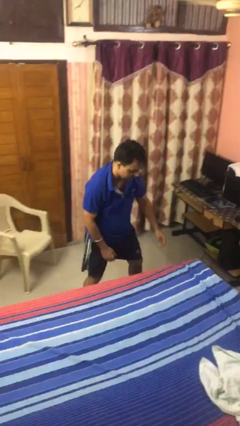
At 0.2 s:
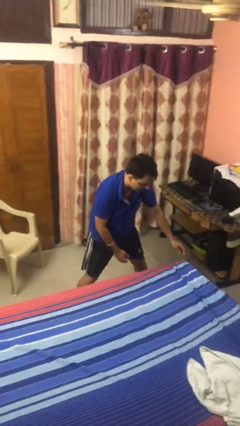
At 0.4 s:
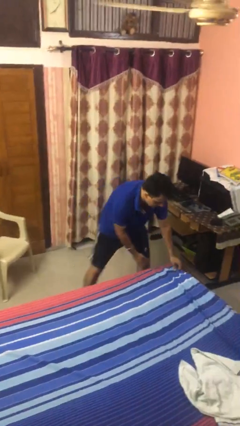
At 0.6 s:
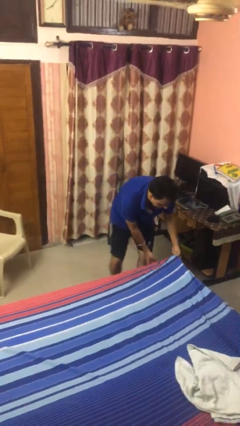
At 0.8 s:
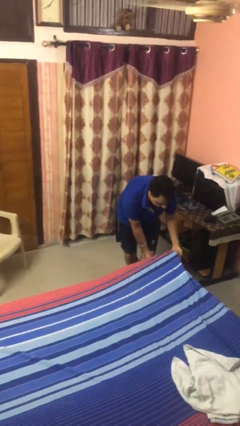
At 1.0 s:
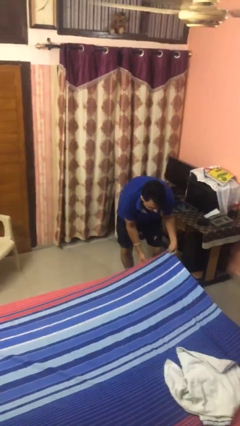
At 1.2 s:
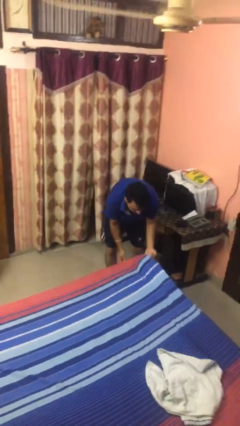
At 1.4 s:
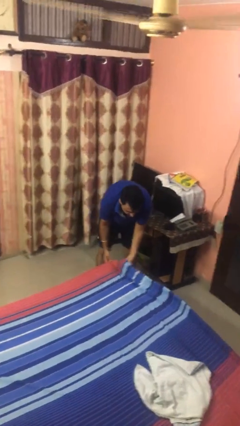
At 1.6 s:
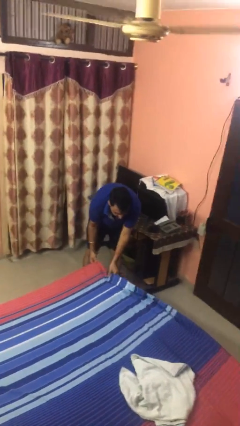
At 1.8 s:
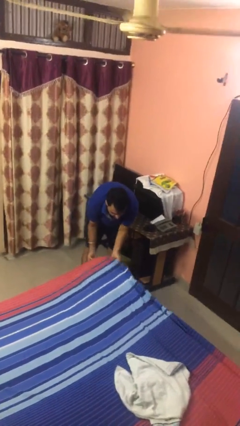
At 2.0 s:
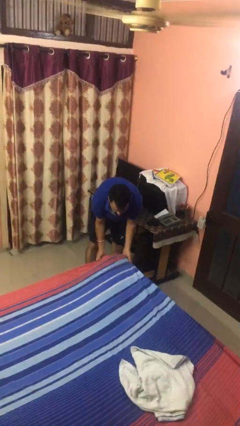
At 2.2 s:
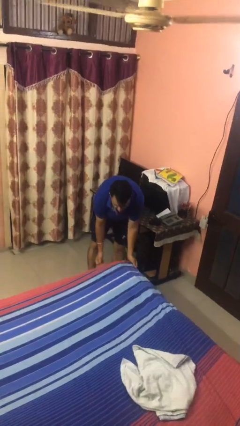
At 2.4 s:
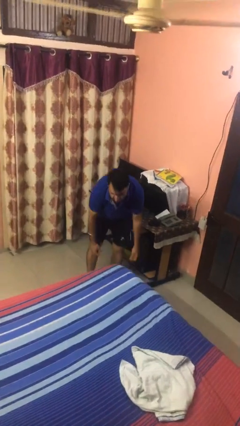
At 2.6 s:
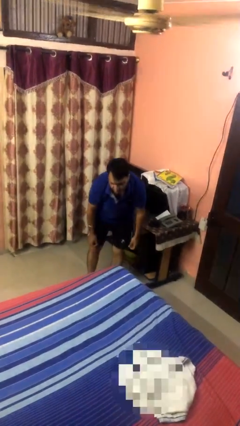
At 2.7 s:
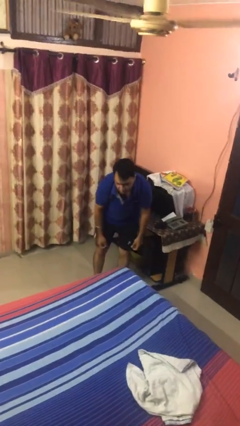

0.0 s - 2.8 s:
person makes bed

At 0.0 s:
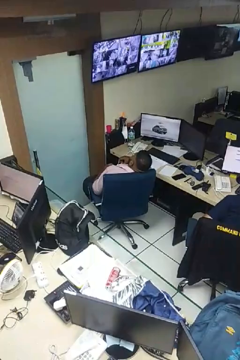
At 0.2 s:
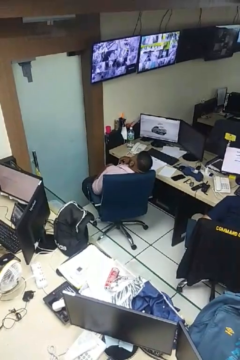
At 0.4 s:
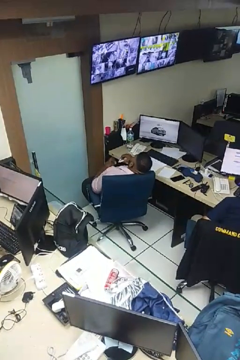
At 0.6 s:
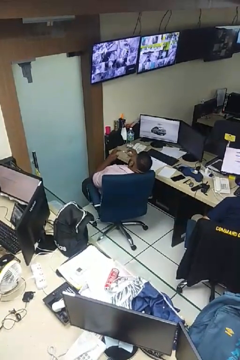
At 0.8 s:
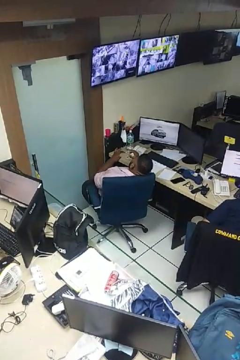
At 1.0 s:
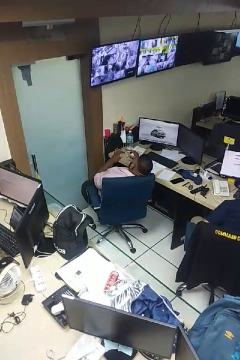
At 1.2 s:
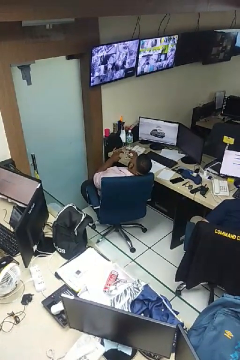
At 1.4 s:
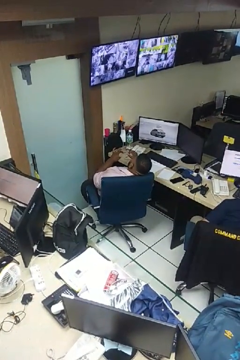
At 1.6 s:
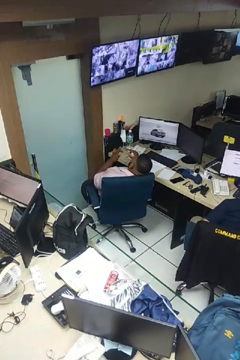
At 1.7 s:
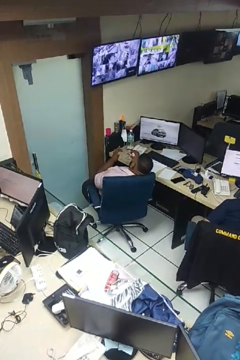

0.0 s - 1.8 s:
person clips fingernails

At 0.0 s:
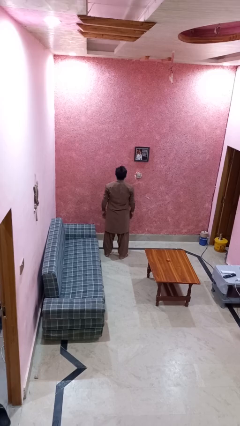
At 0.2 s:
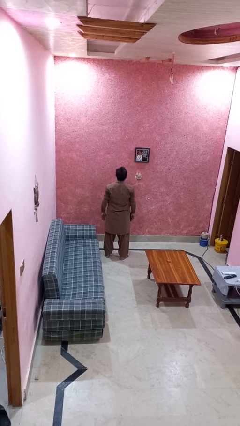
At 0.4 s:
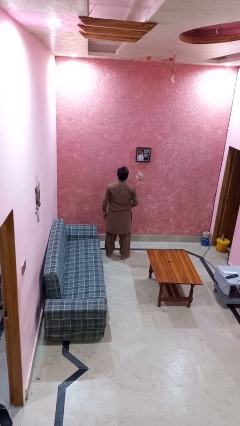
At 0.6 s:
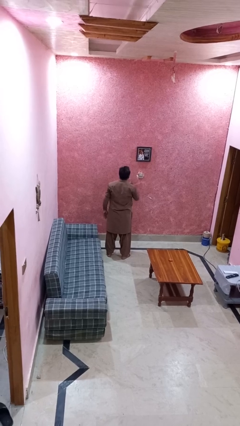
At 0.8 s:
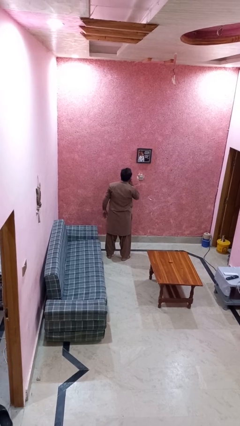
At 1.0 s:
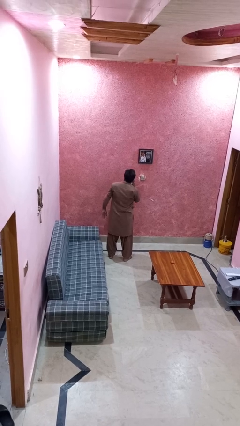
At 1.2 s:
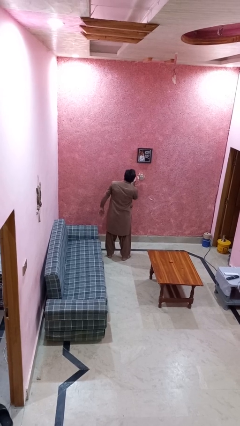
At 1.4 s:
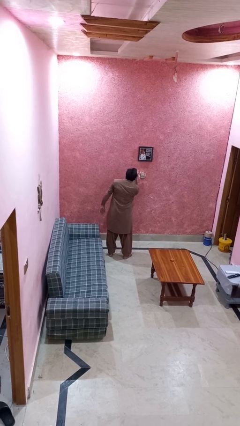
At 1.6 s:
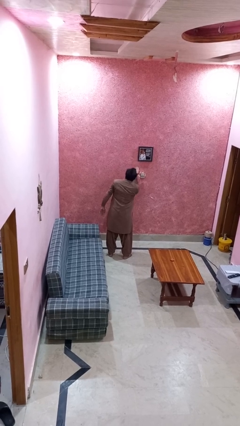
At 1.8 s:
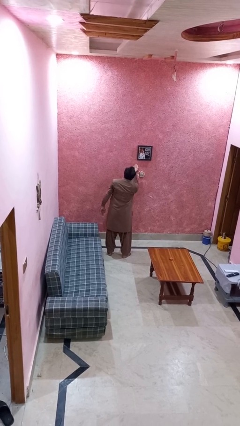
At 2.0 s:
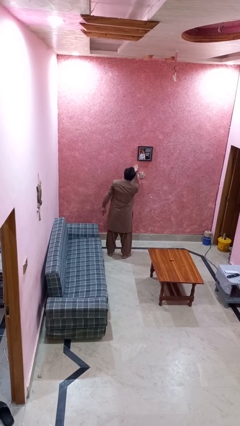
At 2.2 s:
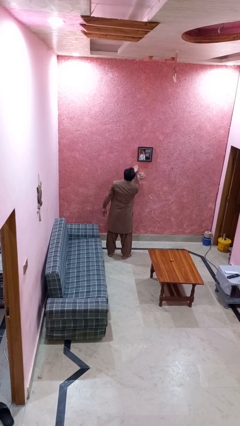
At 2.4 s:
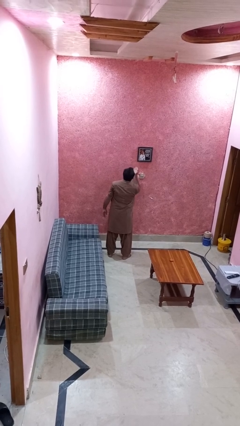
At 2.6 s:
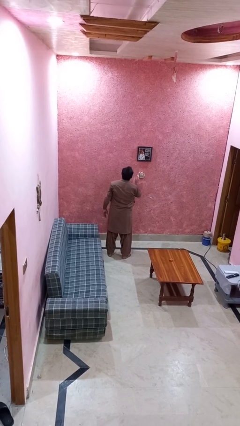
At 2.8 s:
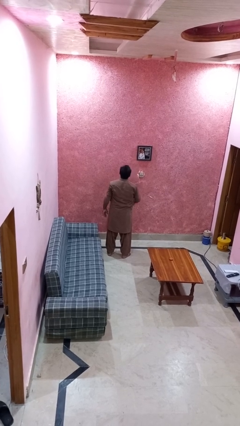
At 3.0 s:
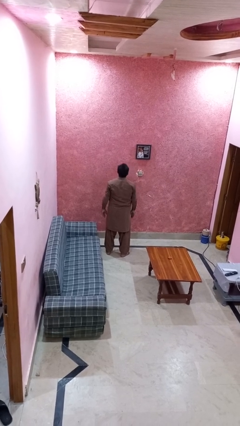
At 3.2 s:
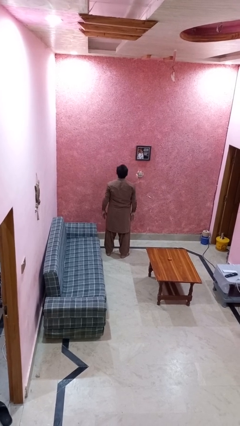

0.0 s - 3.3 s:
person gestures blow kiss

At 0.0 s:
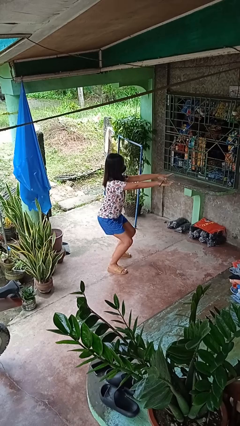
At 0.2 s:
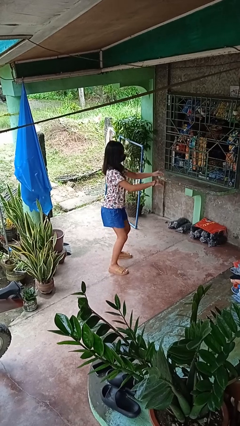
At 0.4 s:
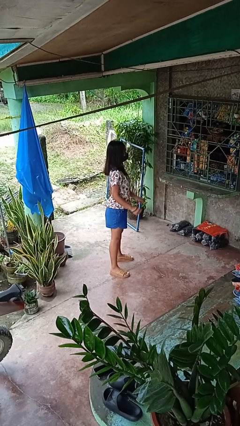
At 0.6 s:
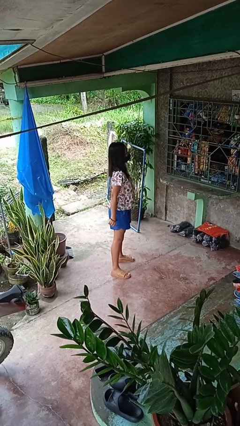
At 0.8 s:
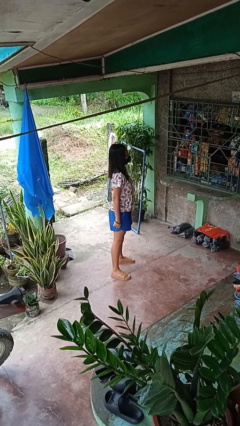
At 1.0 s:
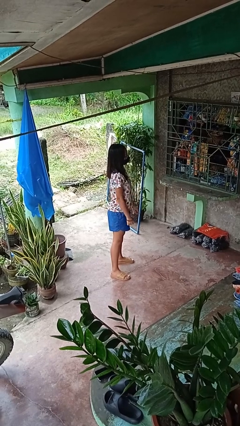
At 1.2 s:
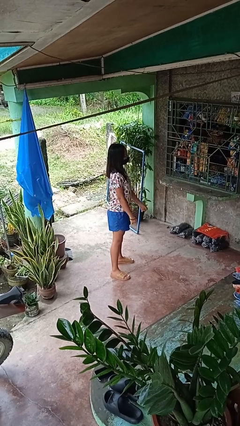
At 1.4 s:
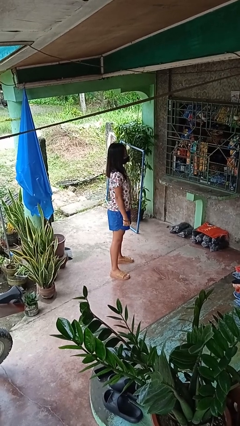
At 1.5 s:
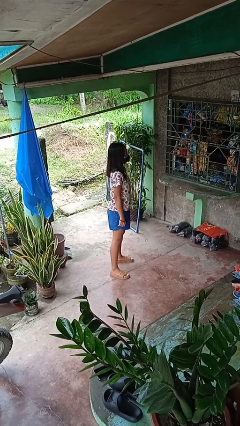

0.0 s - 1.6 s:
person stands up

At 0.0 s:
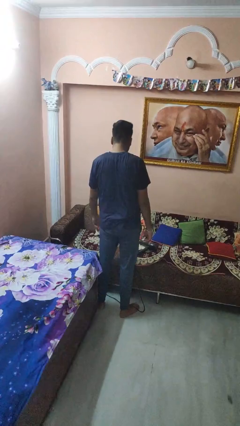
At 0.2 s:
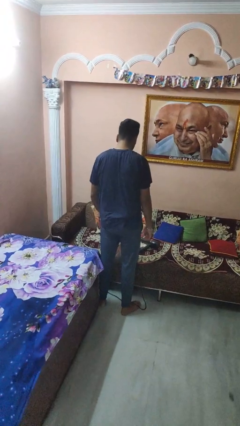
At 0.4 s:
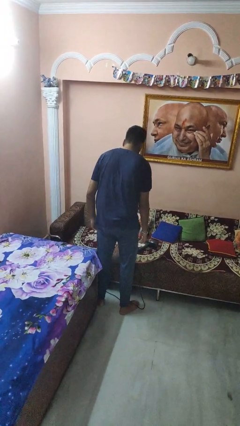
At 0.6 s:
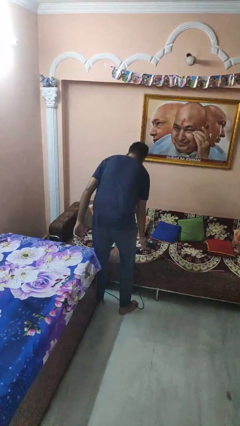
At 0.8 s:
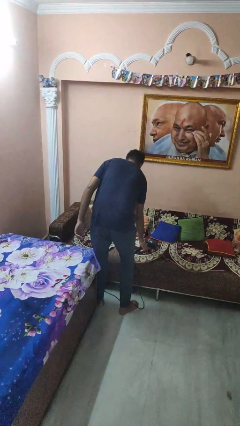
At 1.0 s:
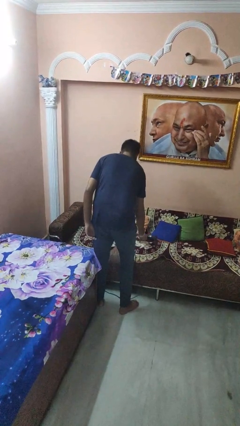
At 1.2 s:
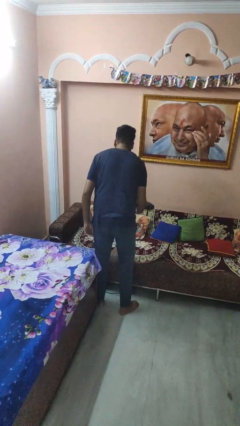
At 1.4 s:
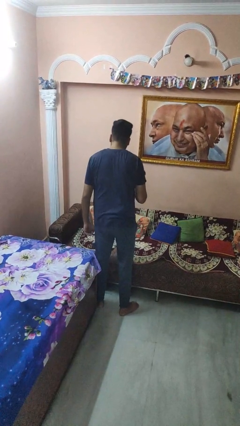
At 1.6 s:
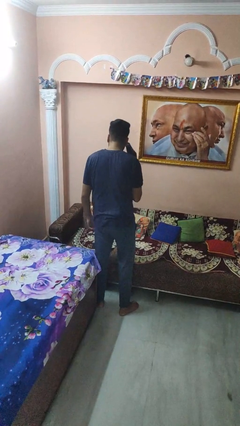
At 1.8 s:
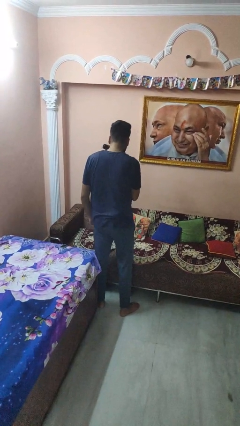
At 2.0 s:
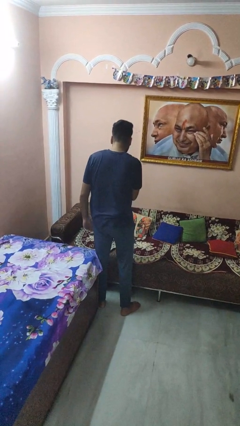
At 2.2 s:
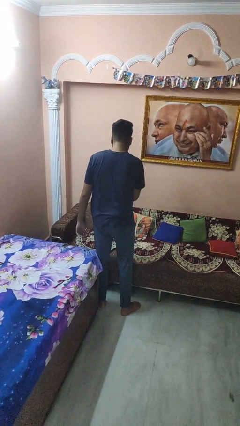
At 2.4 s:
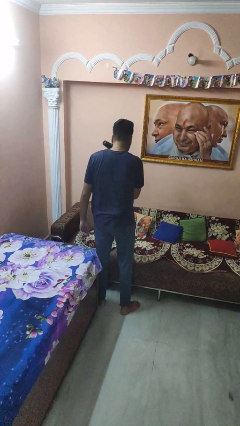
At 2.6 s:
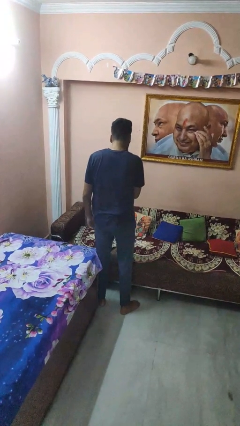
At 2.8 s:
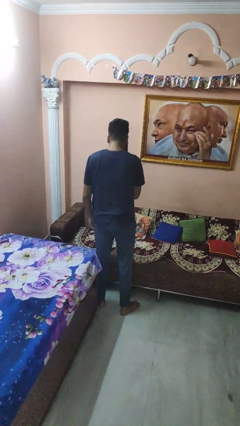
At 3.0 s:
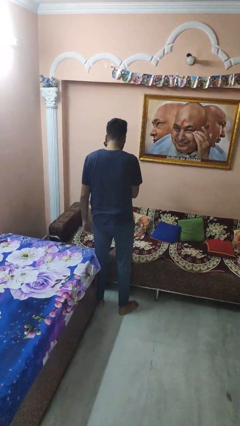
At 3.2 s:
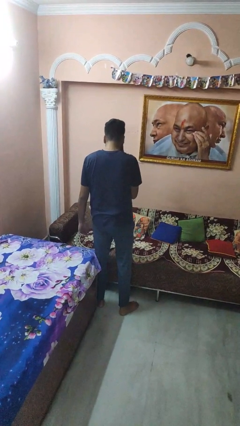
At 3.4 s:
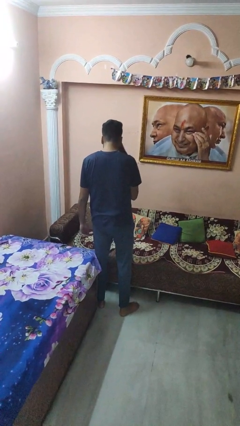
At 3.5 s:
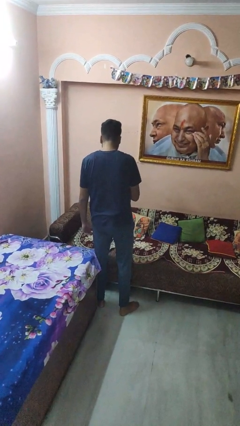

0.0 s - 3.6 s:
person dries hair with hairdryer

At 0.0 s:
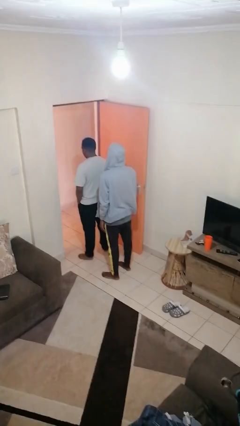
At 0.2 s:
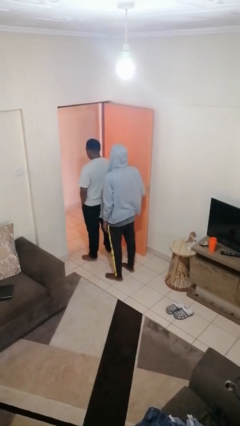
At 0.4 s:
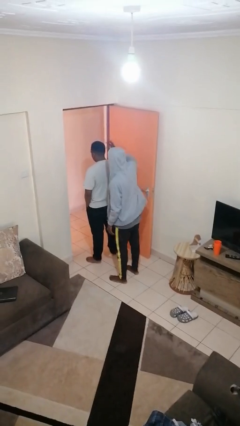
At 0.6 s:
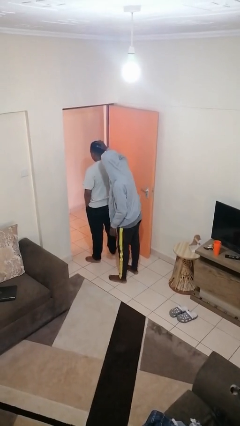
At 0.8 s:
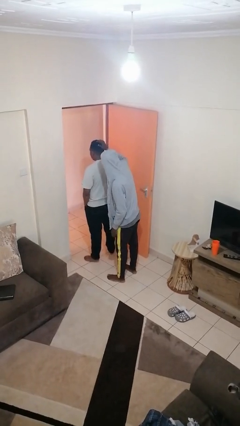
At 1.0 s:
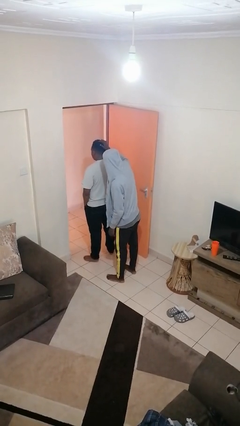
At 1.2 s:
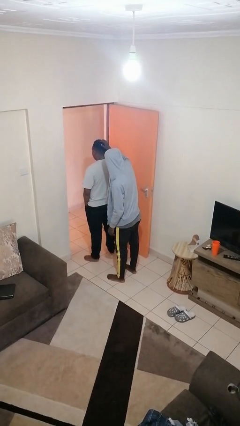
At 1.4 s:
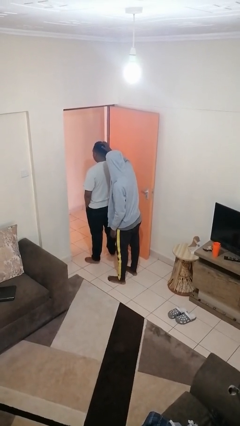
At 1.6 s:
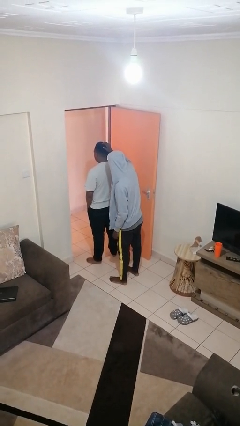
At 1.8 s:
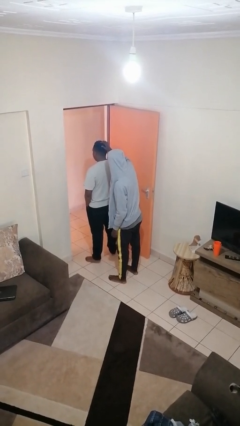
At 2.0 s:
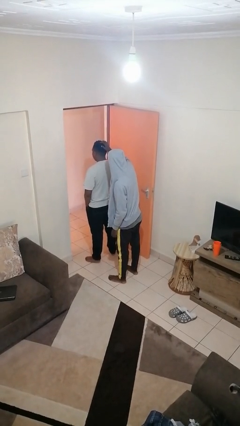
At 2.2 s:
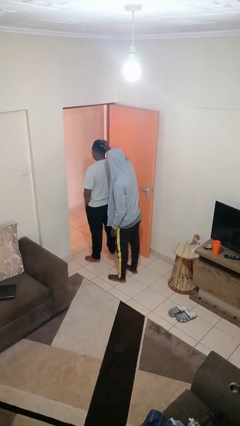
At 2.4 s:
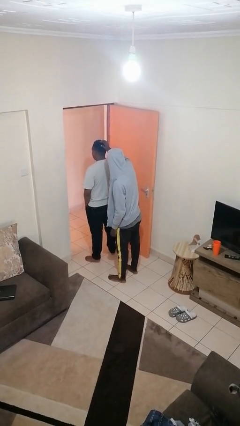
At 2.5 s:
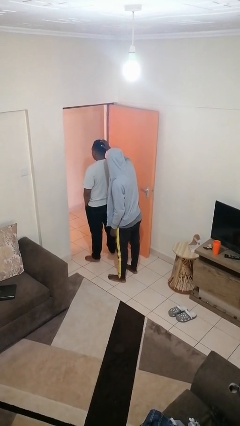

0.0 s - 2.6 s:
person grabs person by hair

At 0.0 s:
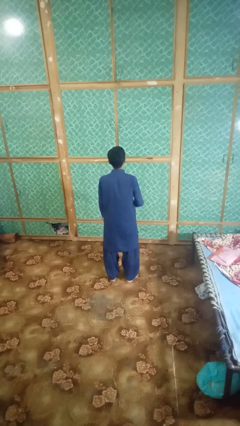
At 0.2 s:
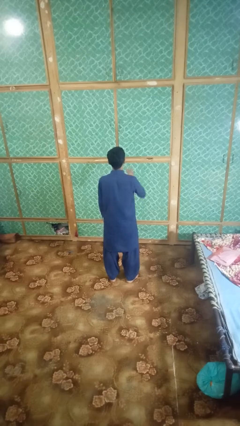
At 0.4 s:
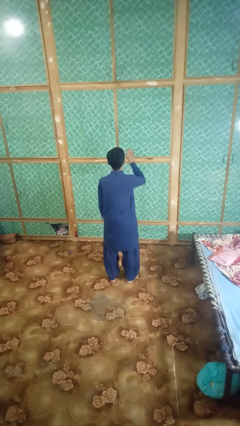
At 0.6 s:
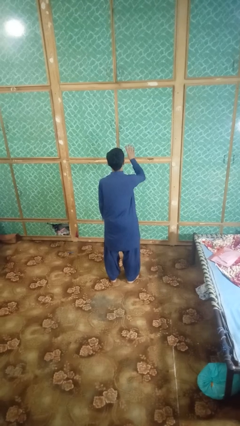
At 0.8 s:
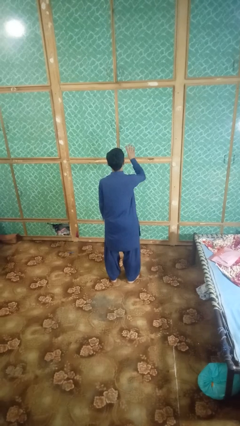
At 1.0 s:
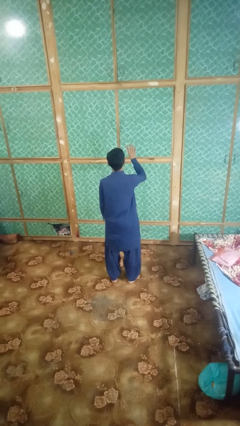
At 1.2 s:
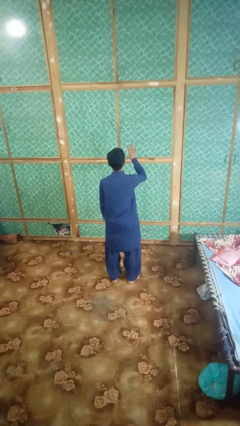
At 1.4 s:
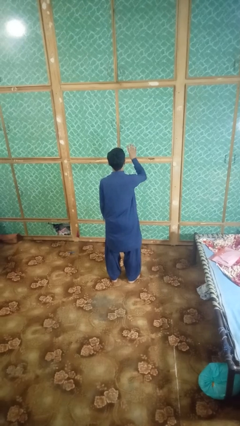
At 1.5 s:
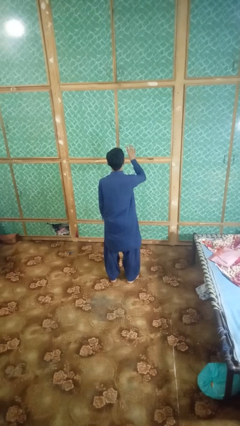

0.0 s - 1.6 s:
person gestures number four

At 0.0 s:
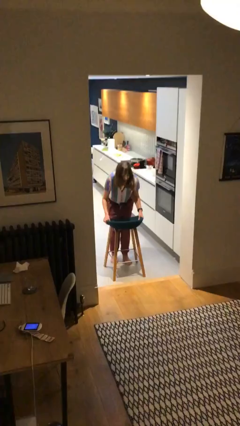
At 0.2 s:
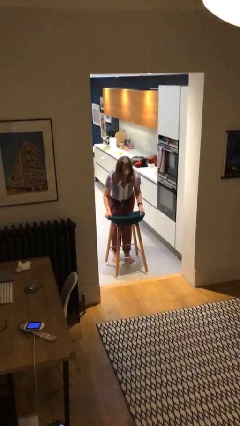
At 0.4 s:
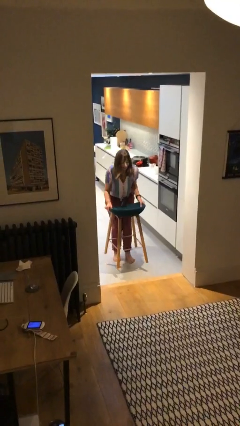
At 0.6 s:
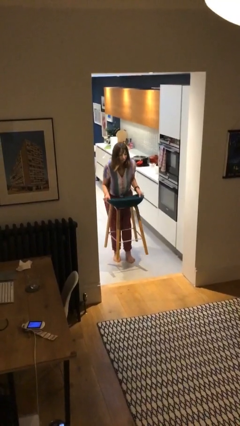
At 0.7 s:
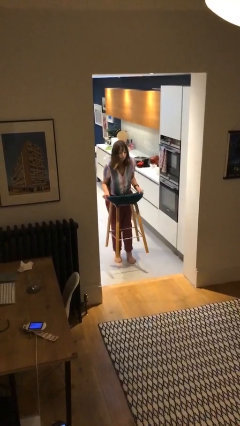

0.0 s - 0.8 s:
person picks up object from floor
